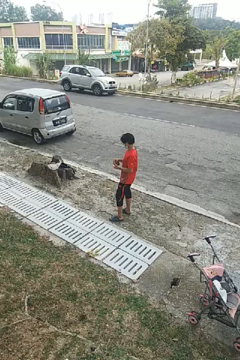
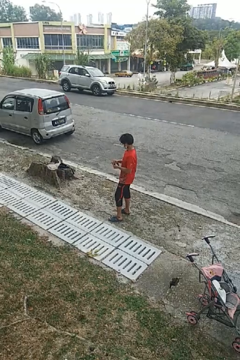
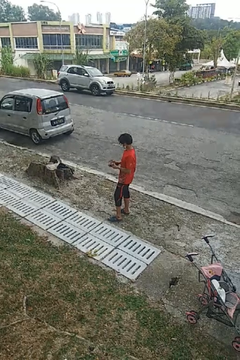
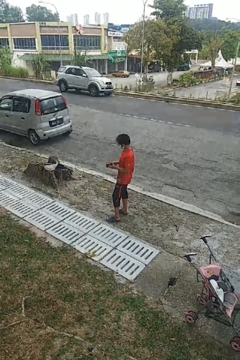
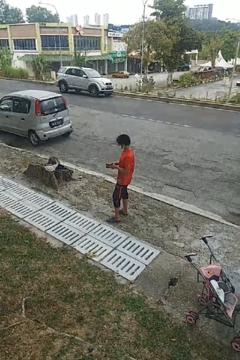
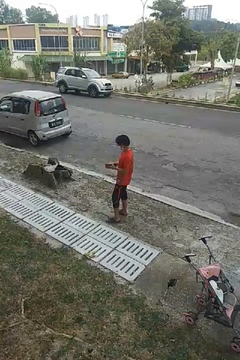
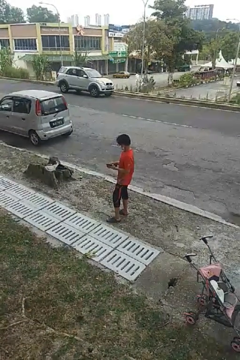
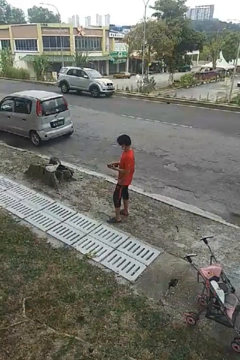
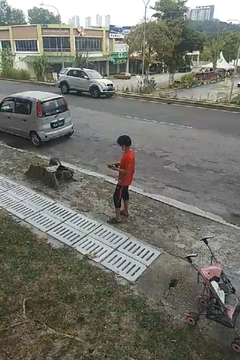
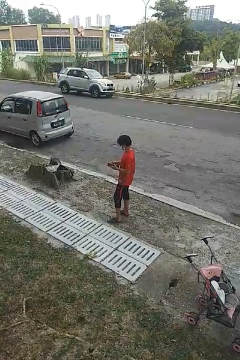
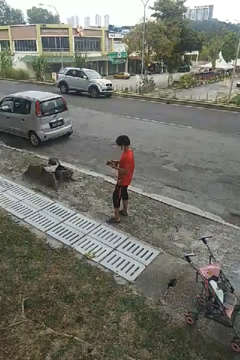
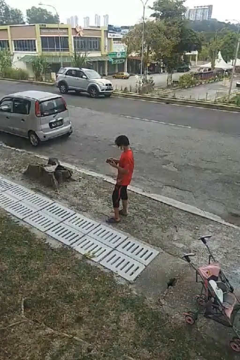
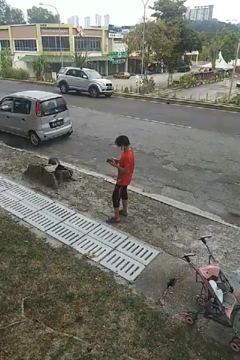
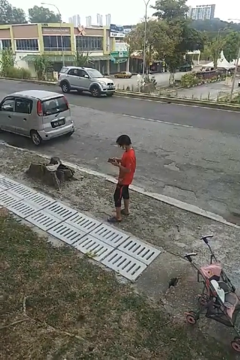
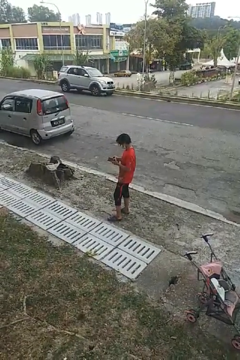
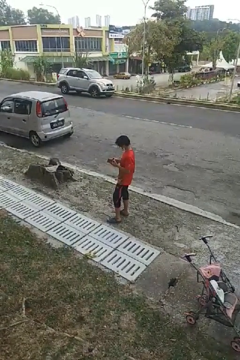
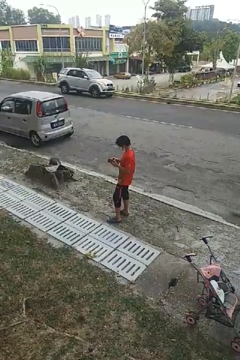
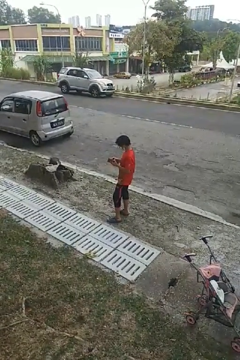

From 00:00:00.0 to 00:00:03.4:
person searches in purse

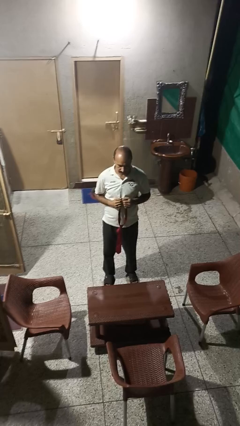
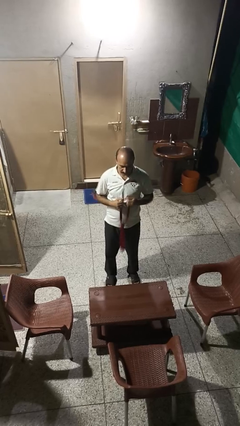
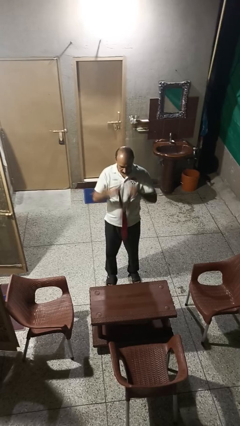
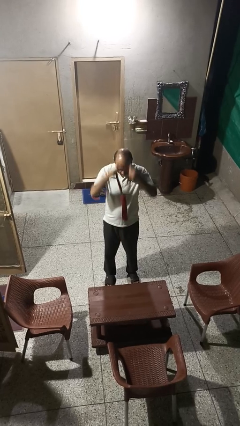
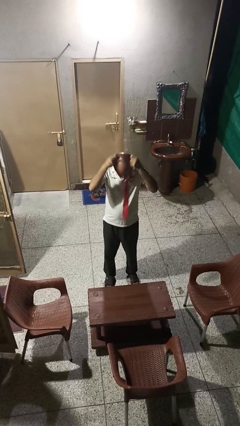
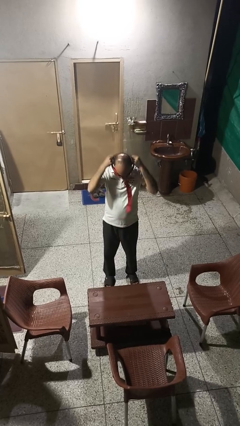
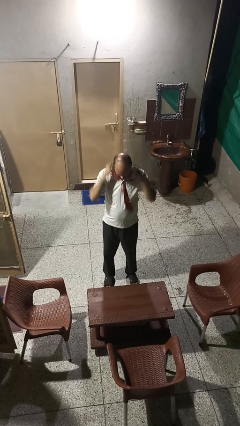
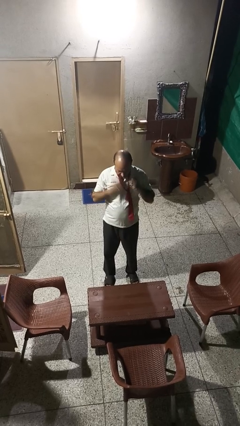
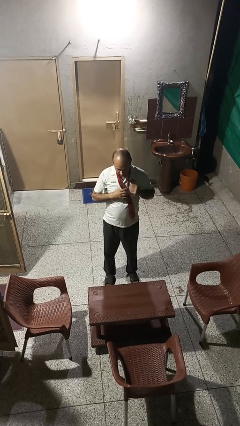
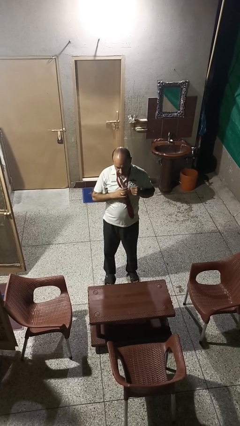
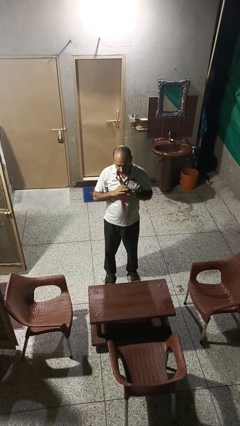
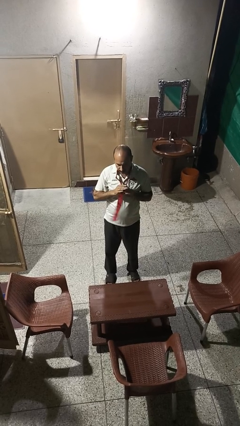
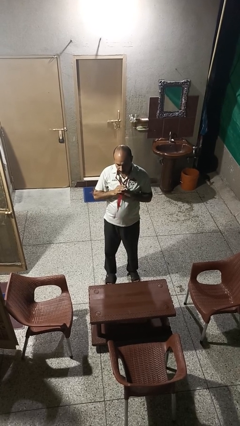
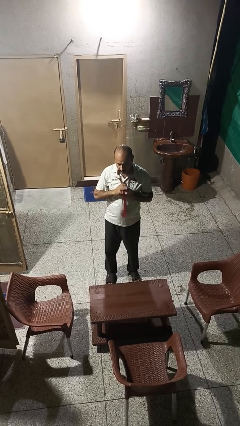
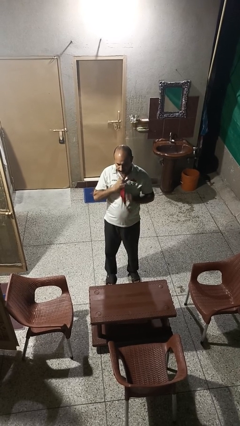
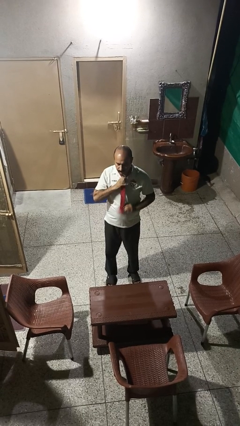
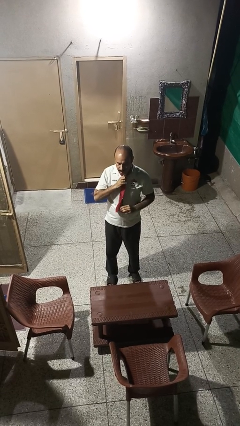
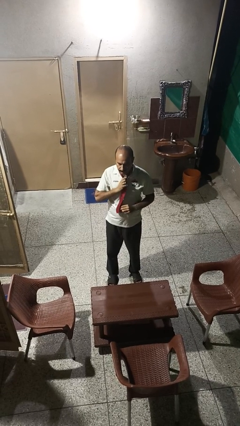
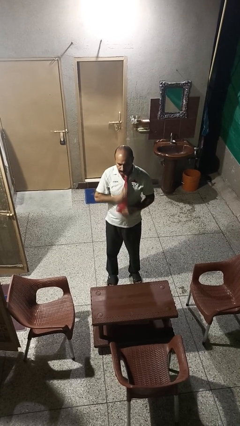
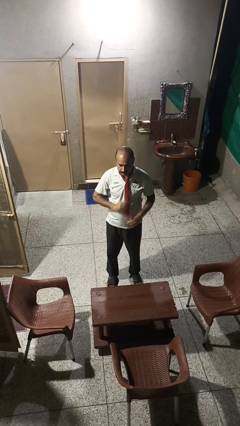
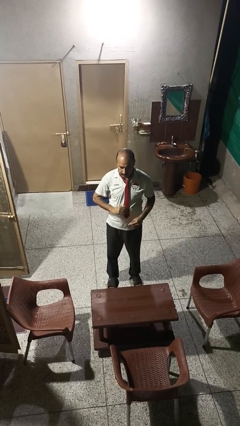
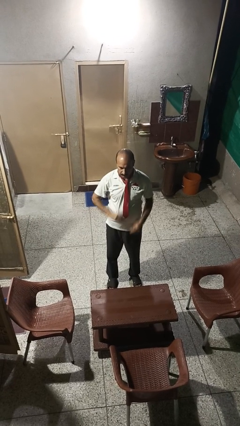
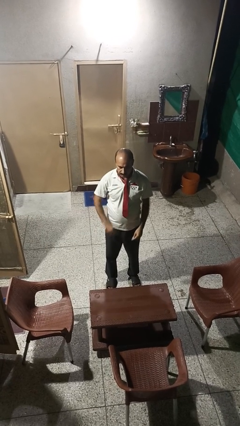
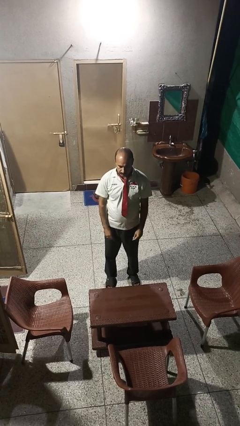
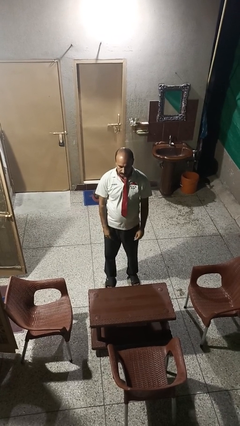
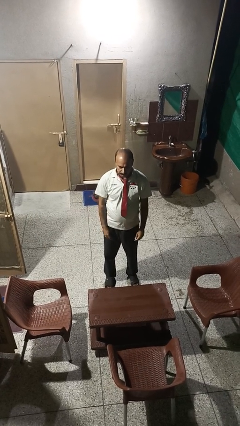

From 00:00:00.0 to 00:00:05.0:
person puts on necktie

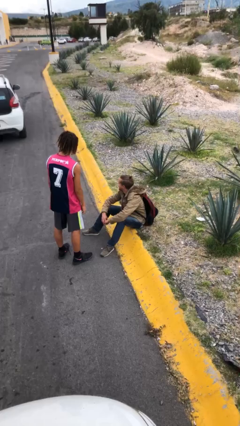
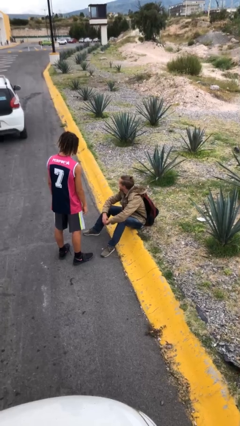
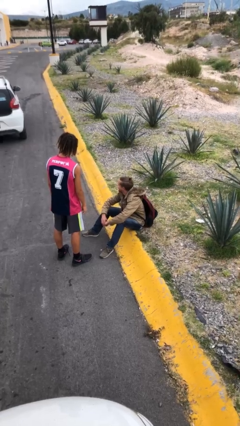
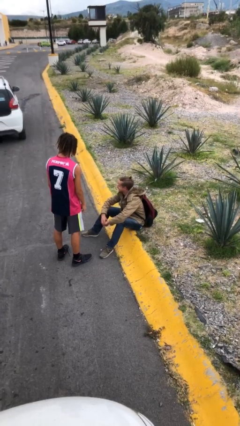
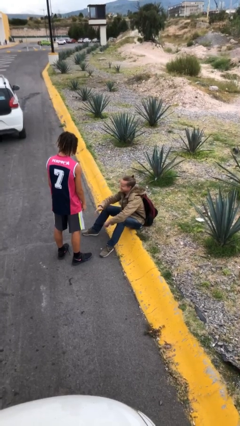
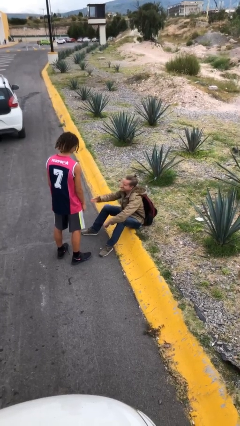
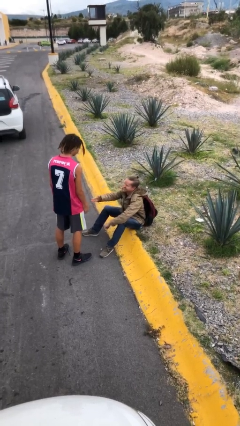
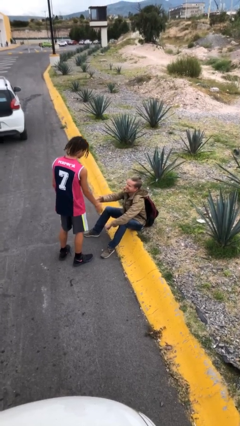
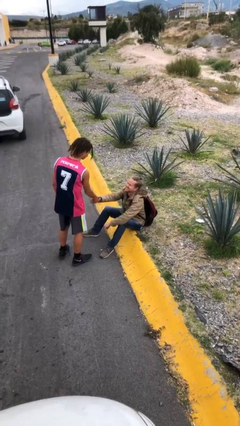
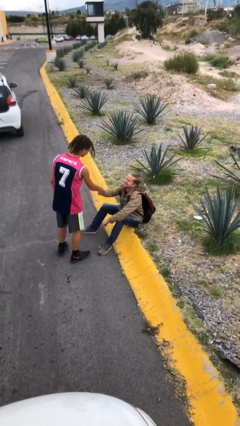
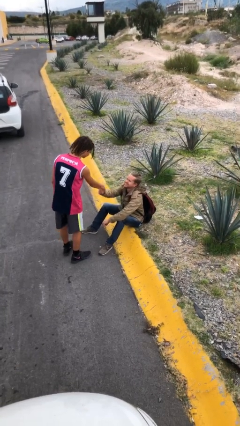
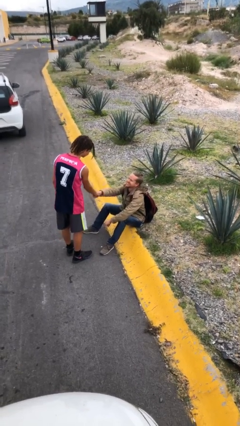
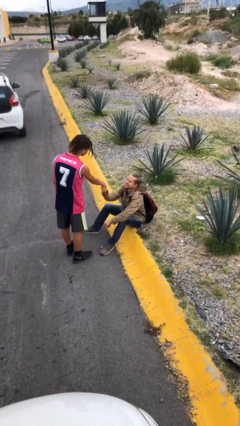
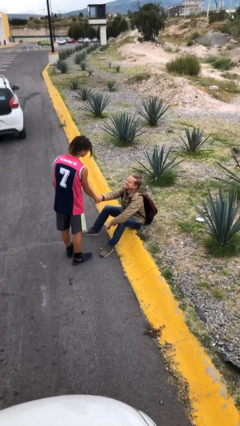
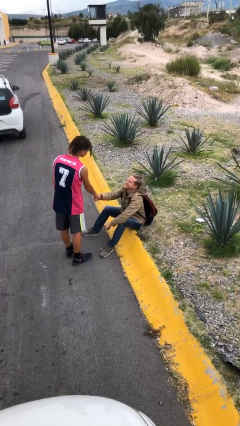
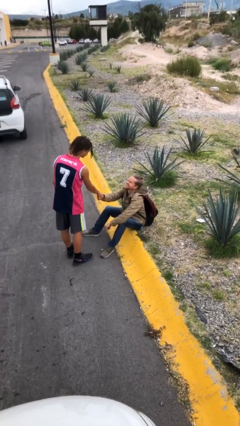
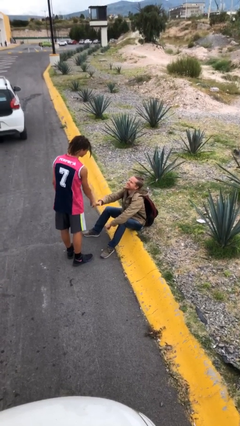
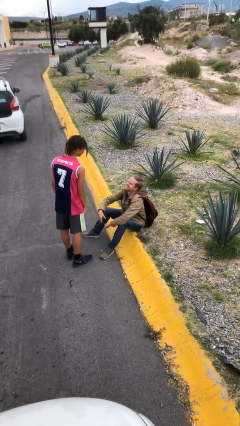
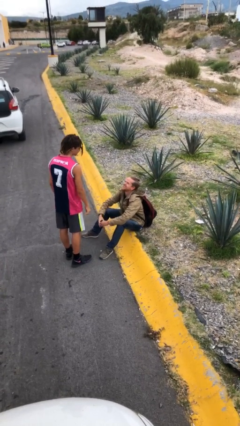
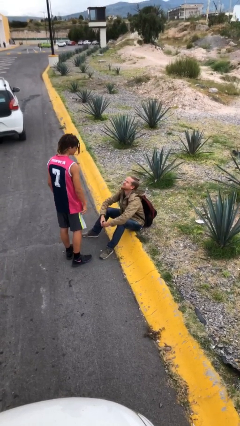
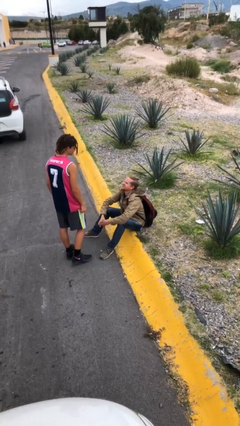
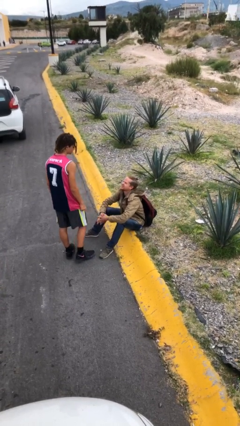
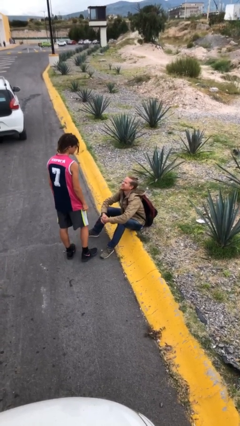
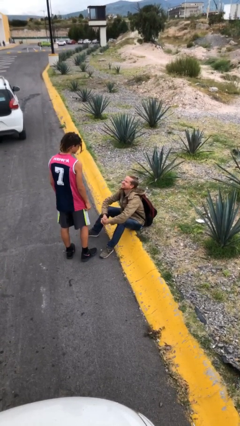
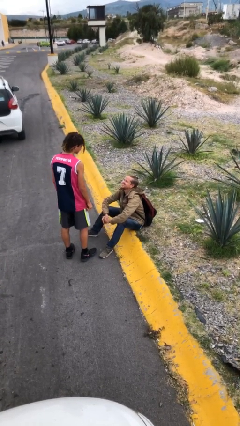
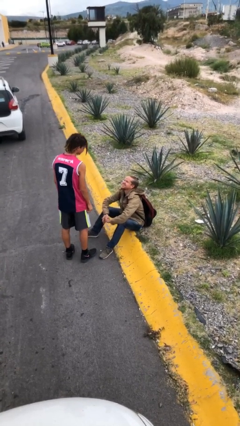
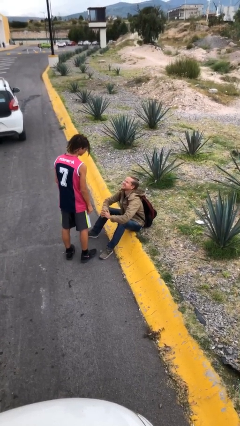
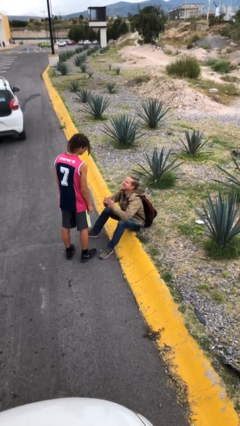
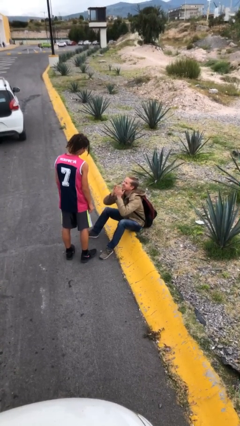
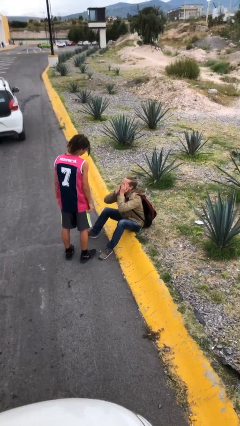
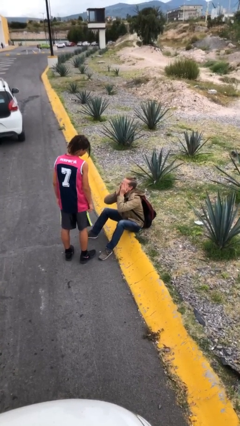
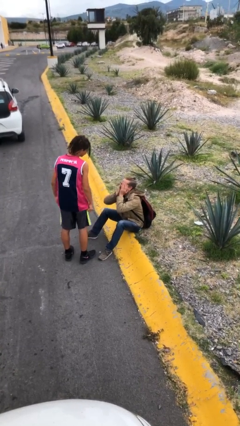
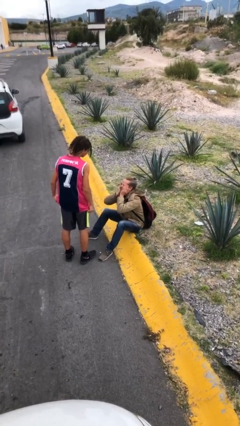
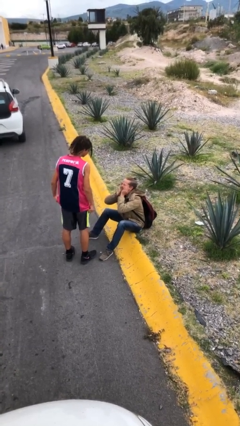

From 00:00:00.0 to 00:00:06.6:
person shakes hand

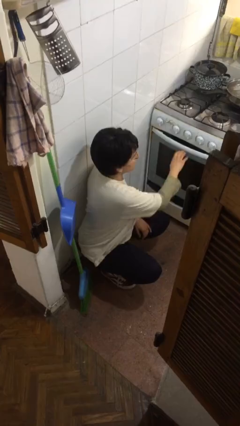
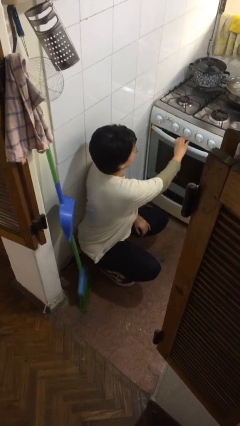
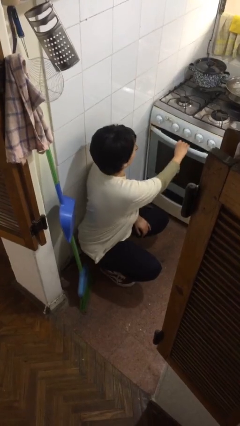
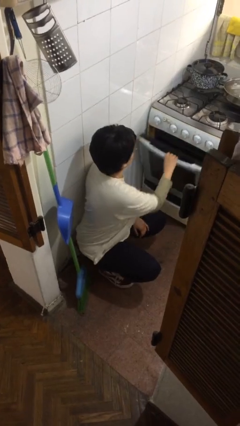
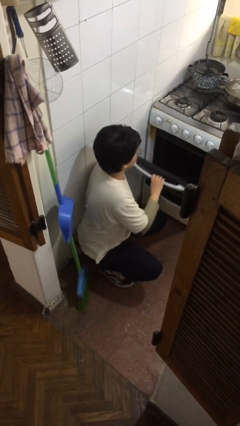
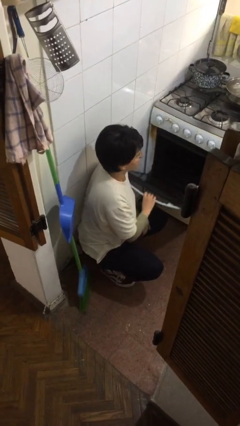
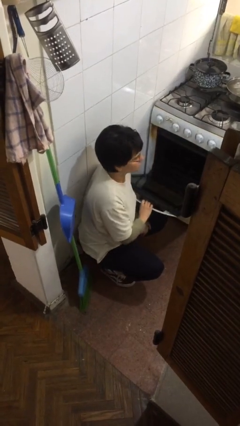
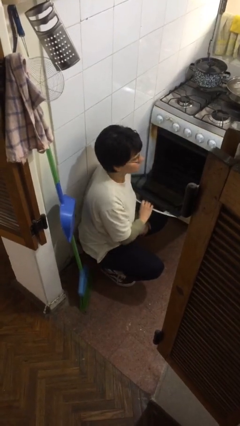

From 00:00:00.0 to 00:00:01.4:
person opens oven door

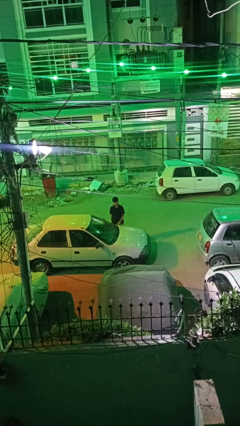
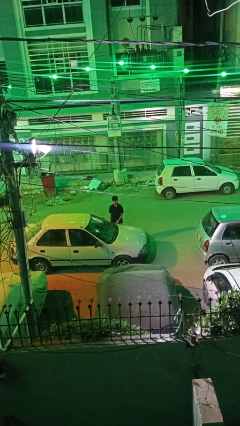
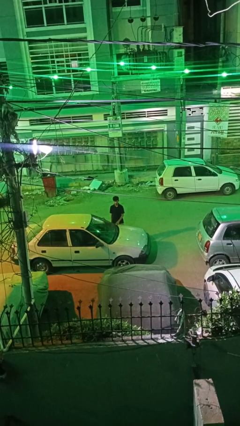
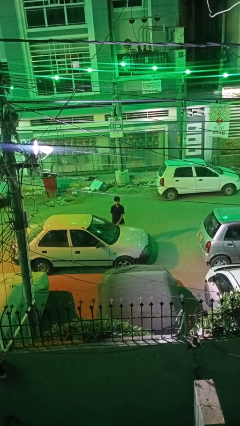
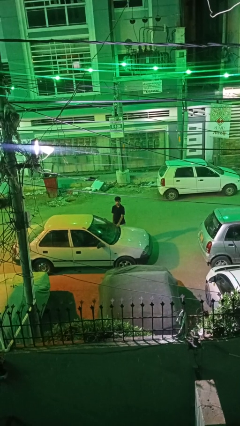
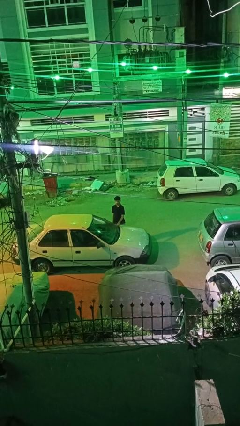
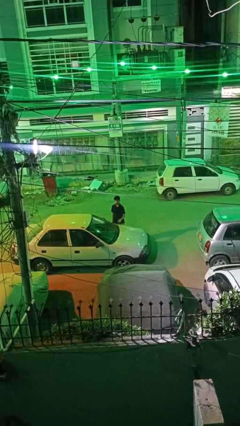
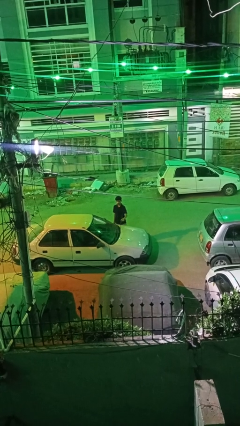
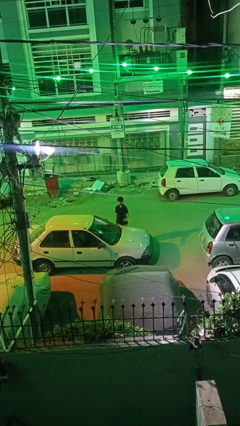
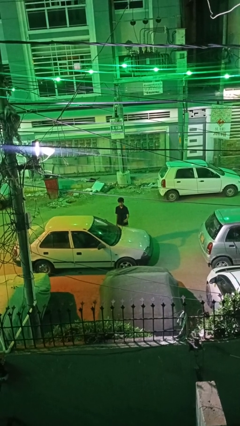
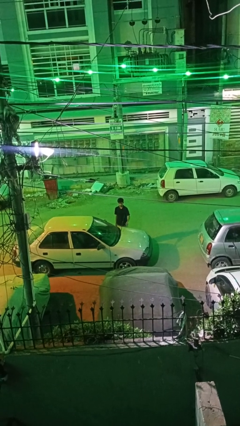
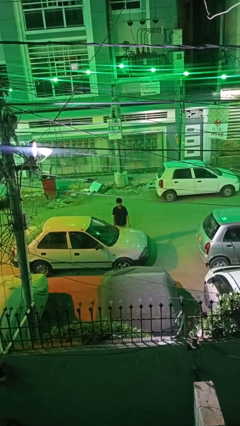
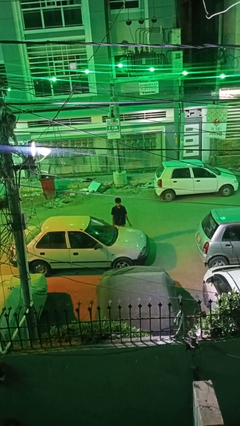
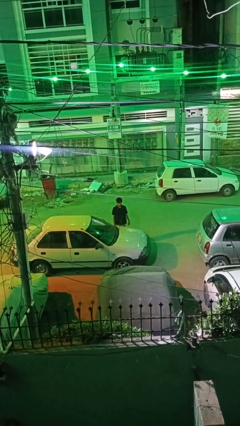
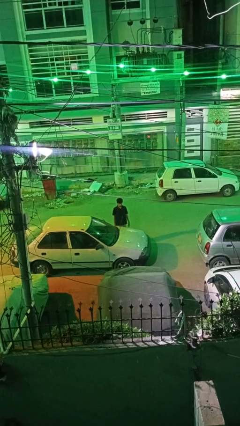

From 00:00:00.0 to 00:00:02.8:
person flips up car wipers
